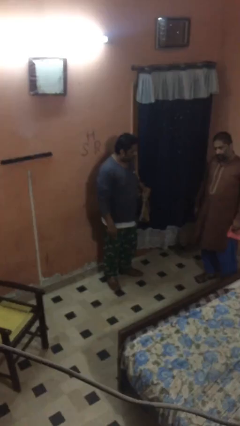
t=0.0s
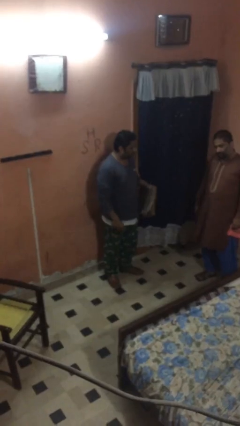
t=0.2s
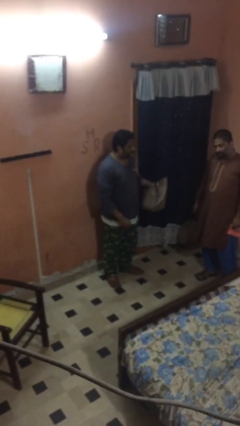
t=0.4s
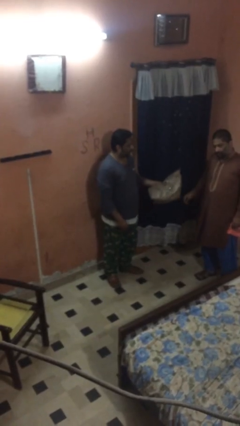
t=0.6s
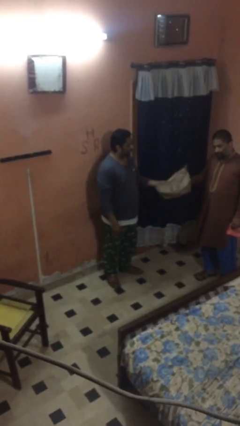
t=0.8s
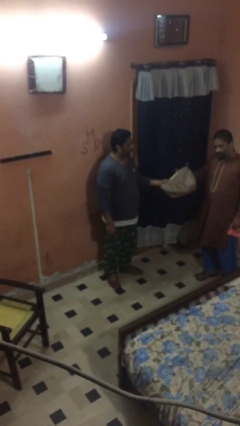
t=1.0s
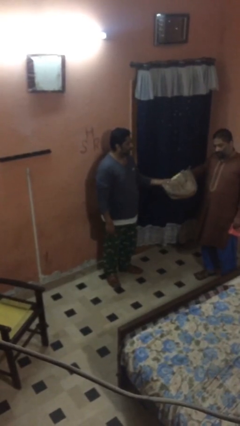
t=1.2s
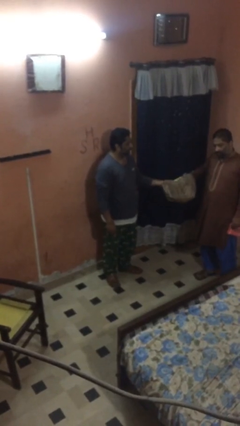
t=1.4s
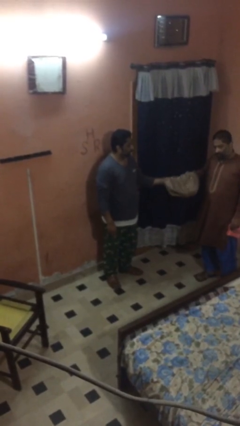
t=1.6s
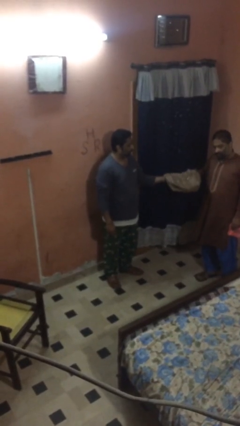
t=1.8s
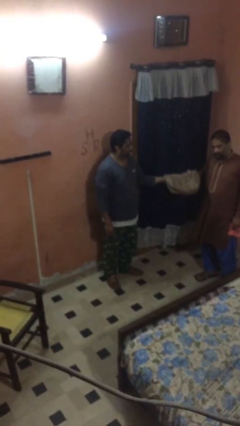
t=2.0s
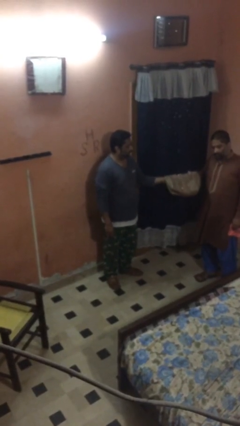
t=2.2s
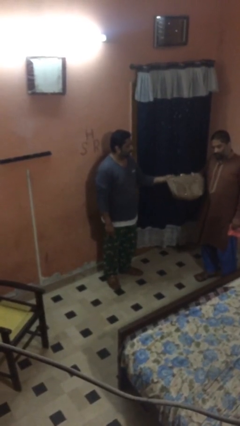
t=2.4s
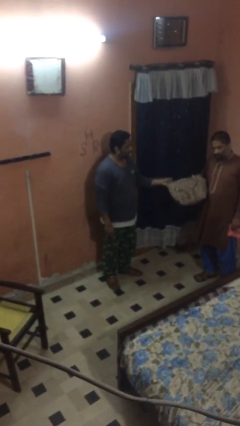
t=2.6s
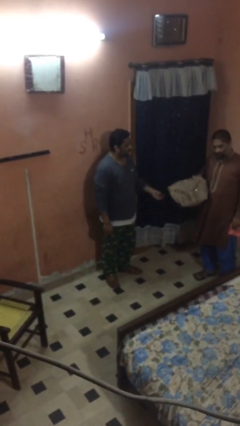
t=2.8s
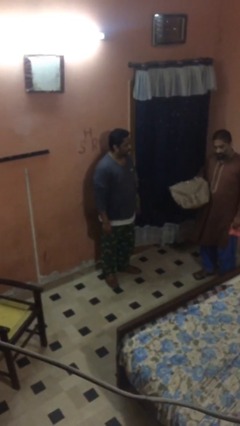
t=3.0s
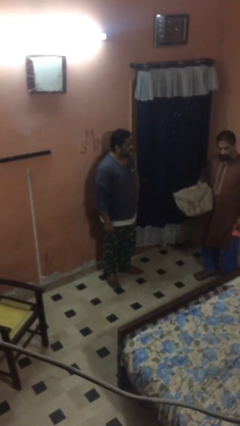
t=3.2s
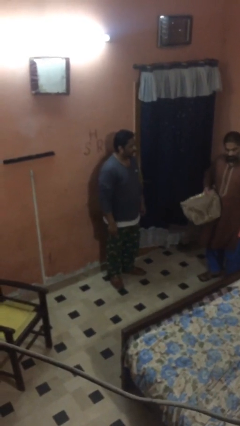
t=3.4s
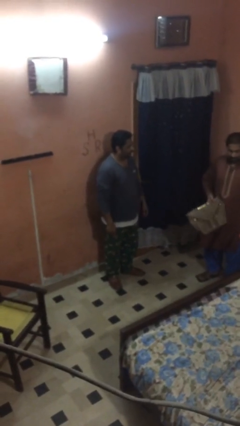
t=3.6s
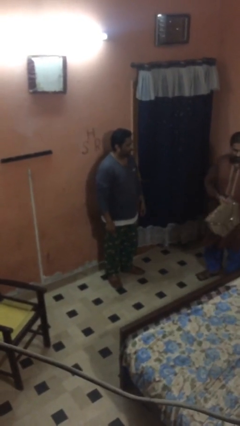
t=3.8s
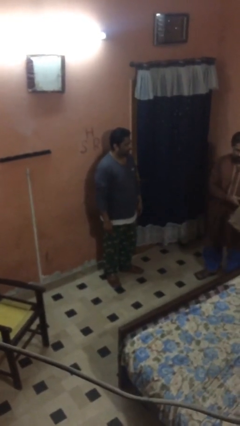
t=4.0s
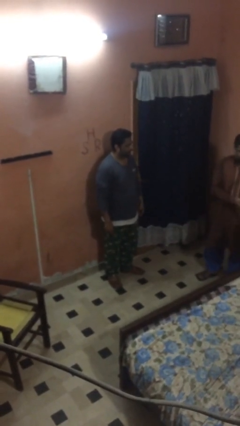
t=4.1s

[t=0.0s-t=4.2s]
person transfers object to person

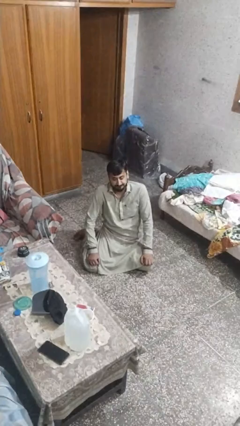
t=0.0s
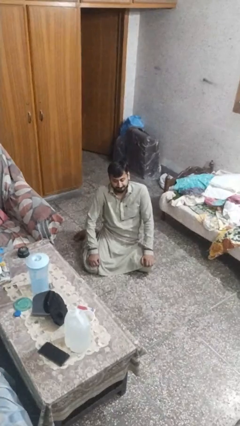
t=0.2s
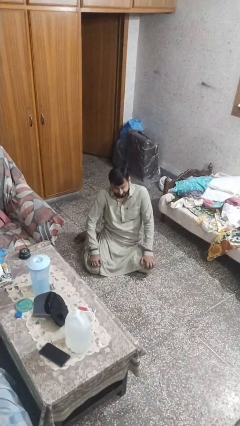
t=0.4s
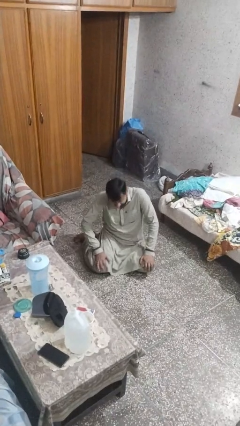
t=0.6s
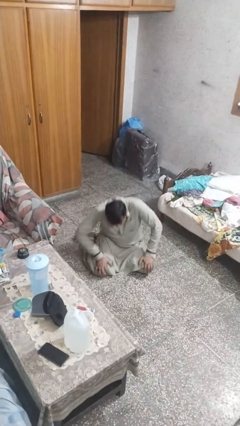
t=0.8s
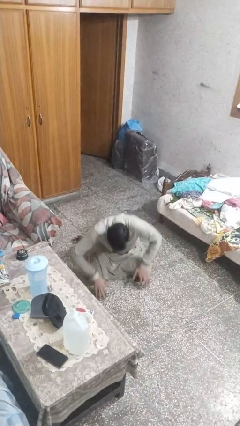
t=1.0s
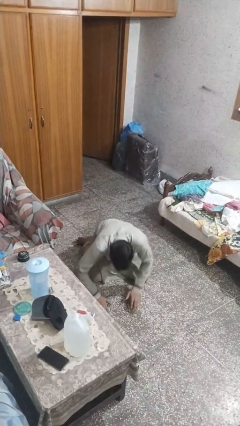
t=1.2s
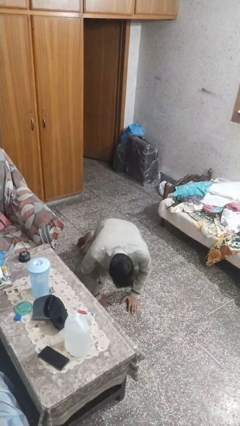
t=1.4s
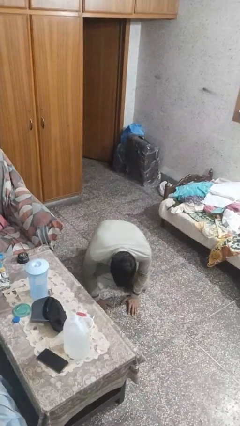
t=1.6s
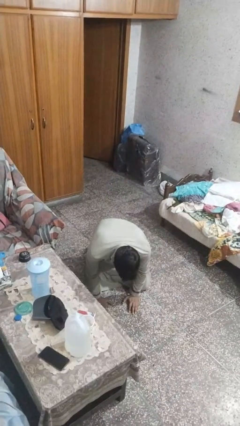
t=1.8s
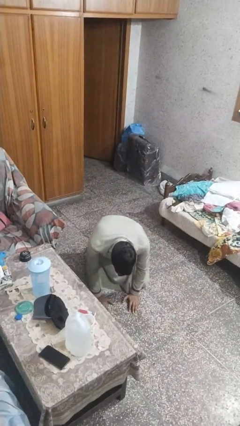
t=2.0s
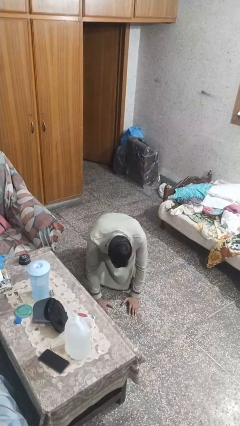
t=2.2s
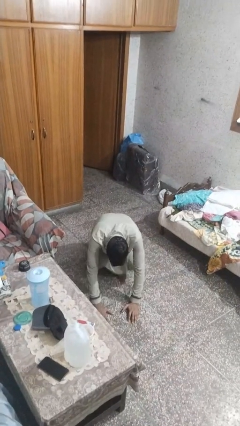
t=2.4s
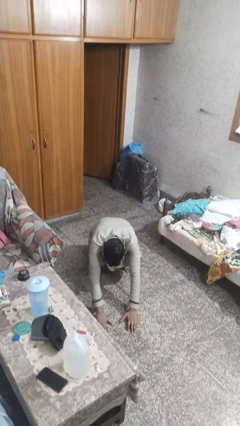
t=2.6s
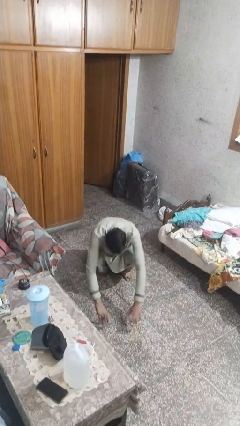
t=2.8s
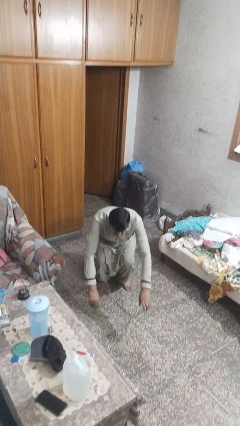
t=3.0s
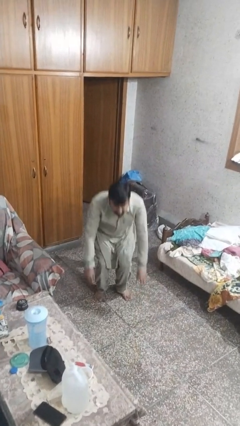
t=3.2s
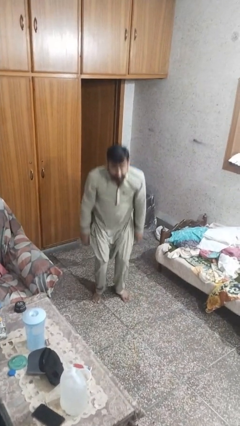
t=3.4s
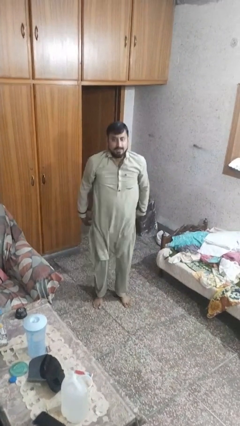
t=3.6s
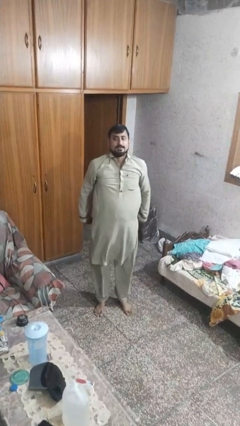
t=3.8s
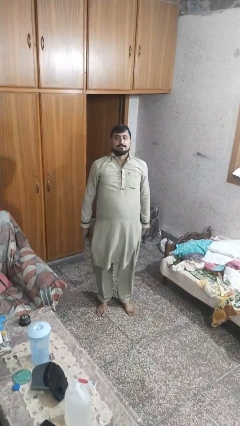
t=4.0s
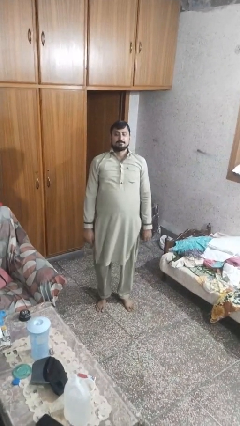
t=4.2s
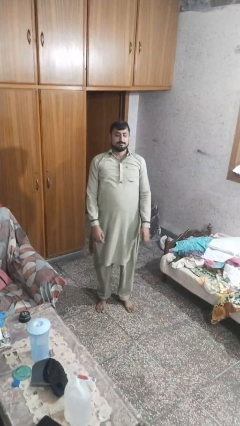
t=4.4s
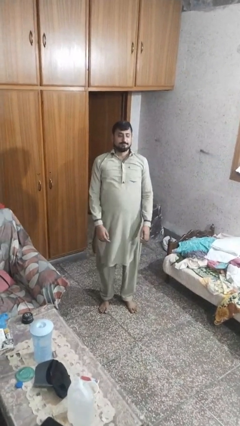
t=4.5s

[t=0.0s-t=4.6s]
person stands up from floor

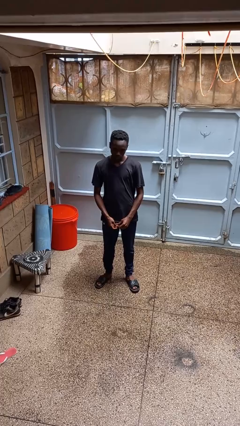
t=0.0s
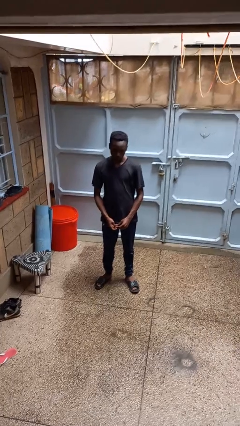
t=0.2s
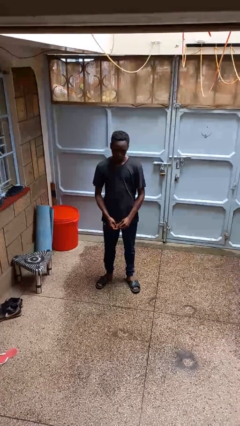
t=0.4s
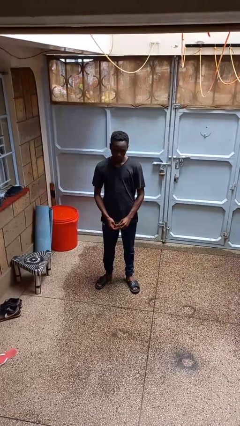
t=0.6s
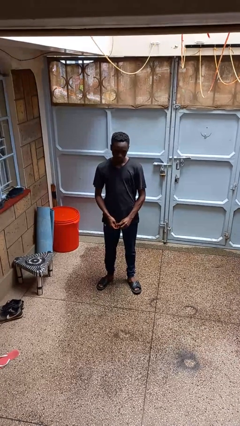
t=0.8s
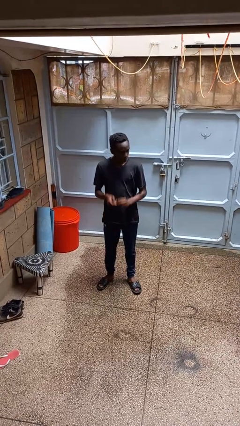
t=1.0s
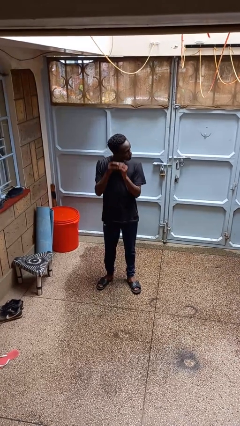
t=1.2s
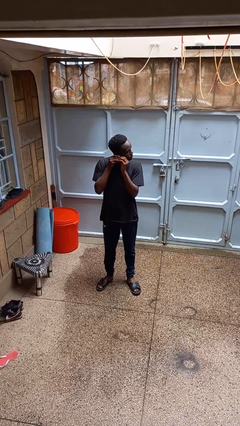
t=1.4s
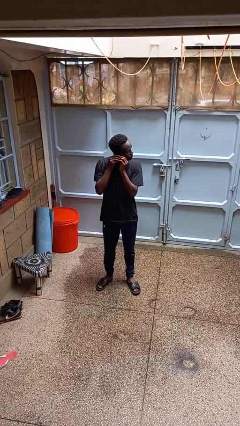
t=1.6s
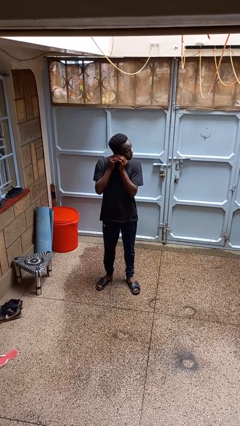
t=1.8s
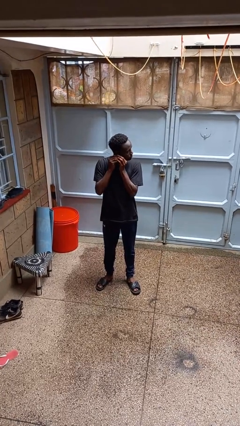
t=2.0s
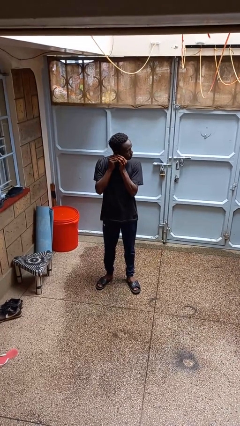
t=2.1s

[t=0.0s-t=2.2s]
person puts on earrings

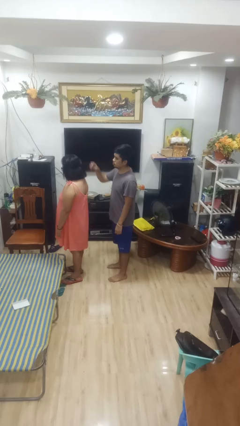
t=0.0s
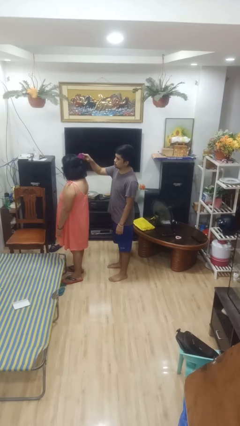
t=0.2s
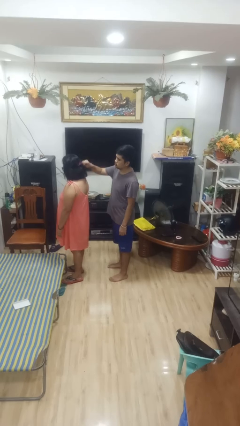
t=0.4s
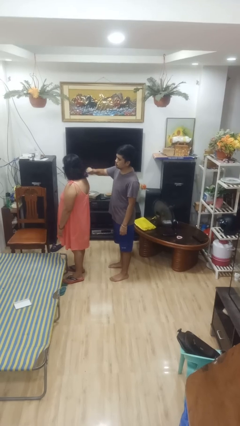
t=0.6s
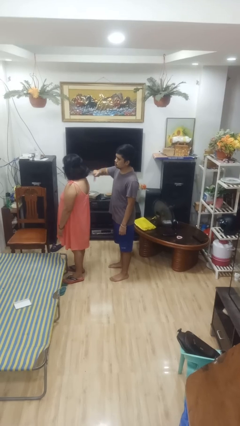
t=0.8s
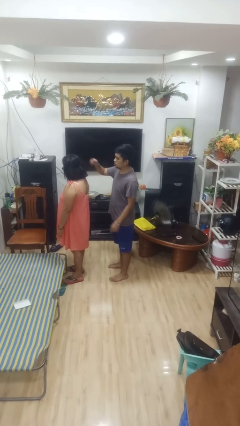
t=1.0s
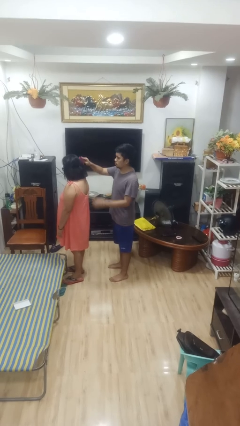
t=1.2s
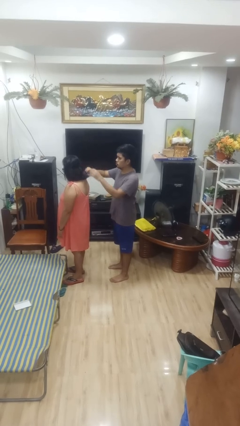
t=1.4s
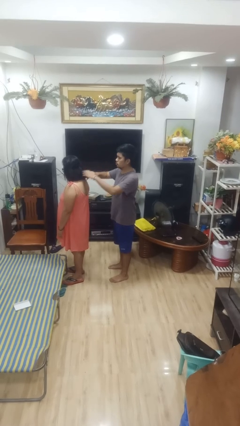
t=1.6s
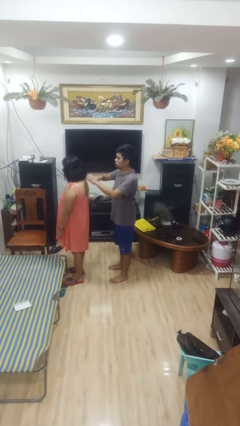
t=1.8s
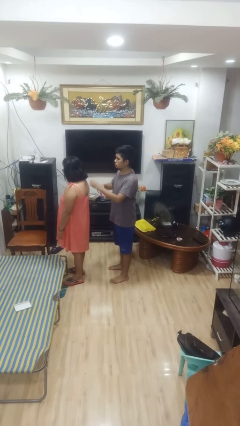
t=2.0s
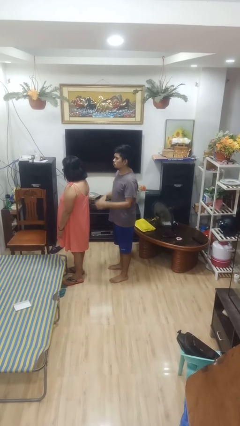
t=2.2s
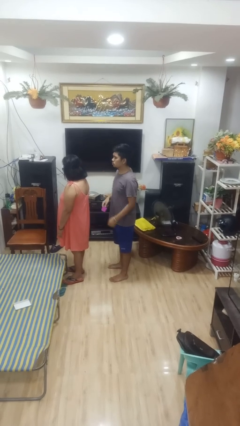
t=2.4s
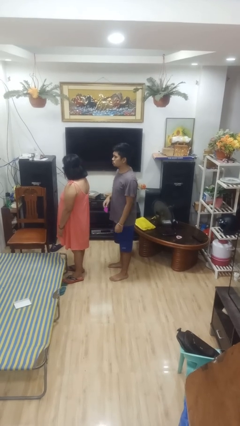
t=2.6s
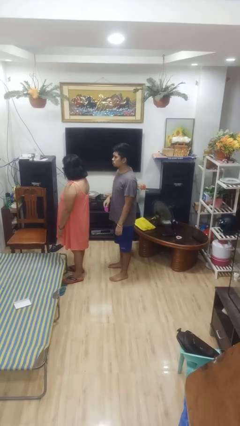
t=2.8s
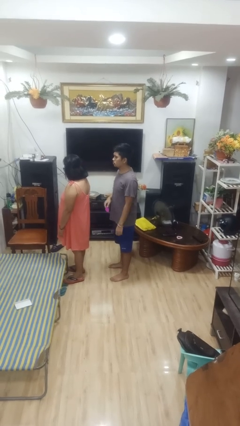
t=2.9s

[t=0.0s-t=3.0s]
person brushes hair of person

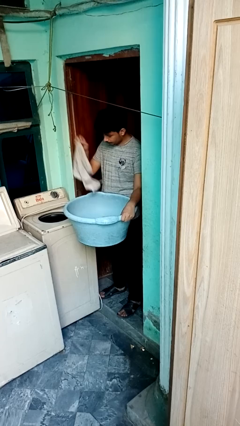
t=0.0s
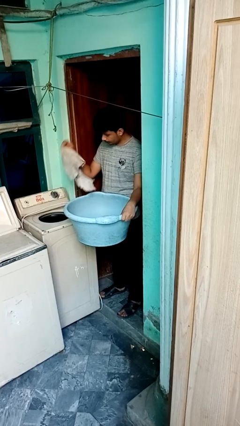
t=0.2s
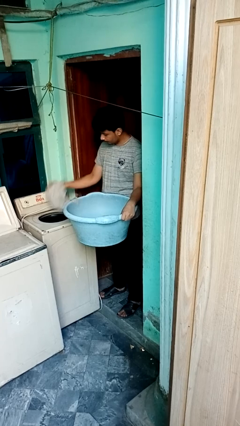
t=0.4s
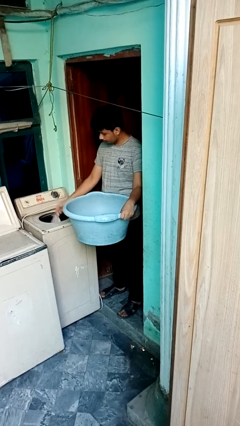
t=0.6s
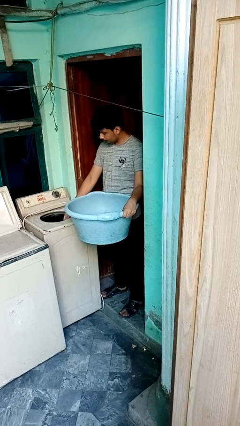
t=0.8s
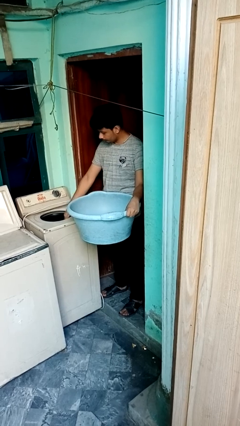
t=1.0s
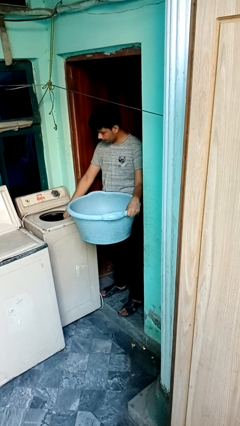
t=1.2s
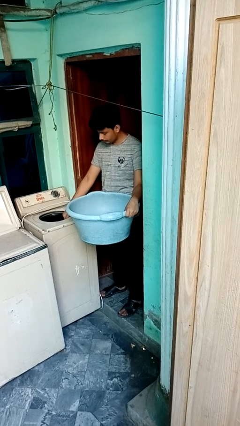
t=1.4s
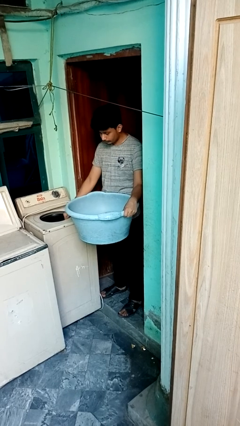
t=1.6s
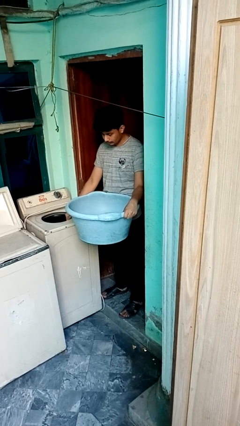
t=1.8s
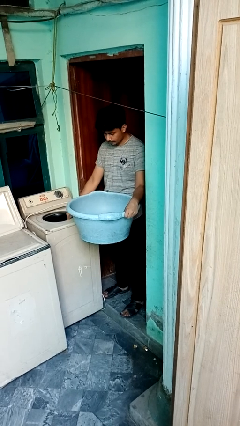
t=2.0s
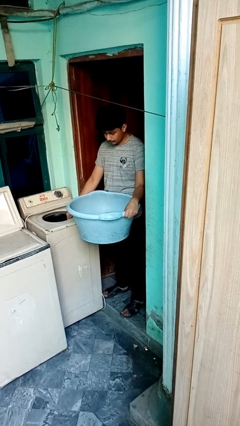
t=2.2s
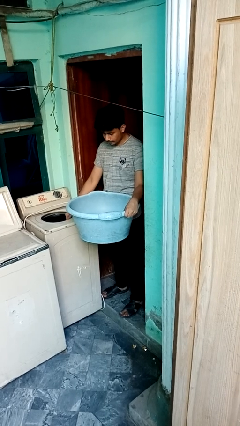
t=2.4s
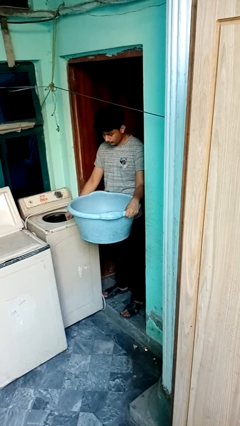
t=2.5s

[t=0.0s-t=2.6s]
person loads dryer

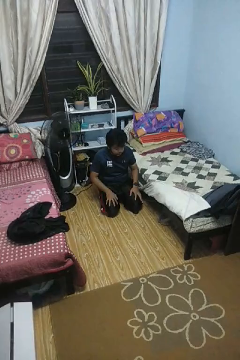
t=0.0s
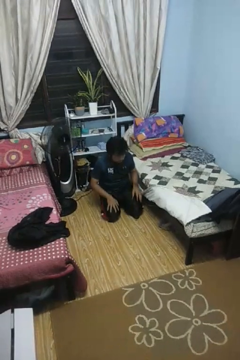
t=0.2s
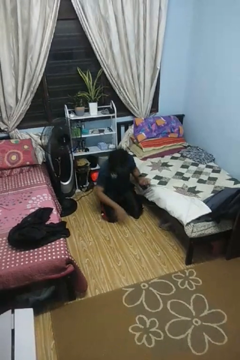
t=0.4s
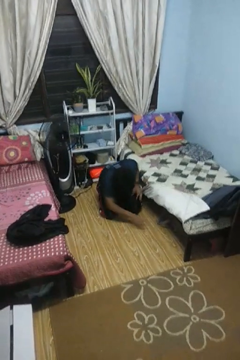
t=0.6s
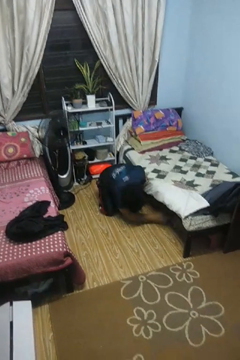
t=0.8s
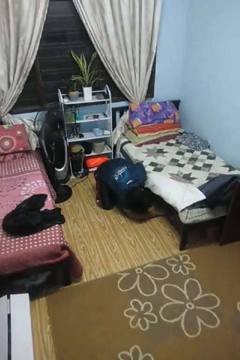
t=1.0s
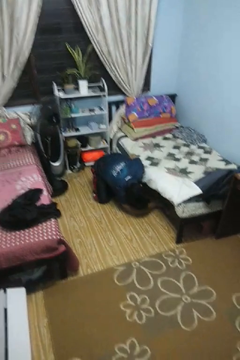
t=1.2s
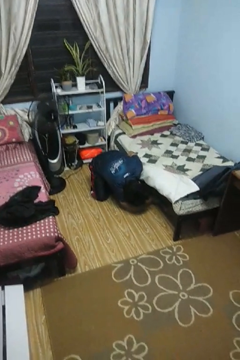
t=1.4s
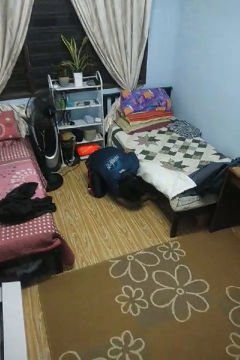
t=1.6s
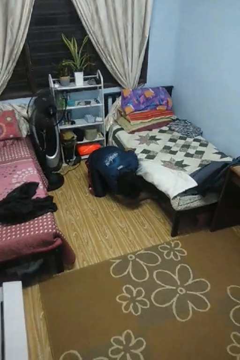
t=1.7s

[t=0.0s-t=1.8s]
person searches under bed
